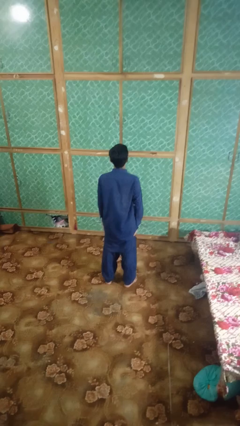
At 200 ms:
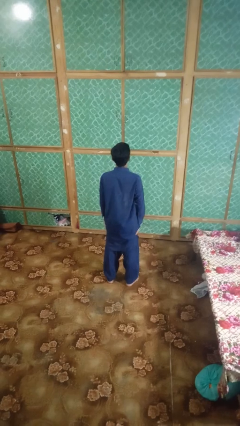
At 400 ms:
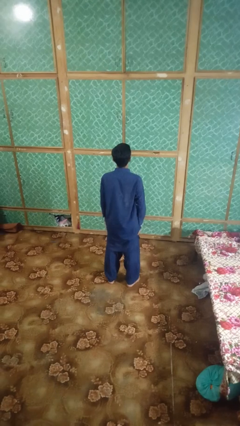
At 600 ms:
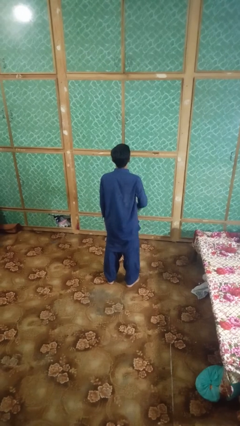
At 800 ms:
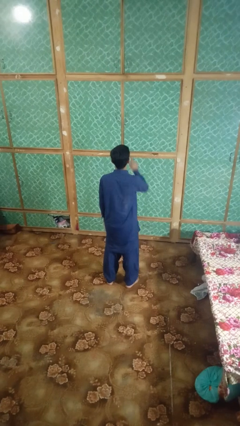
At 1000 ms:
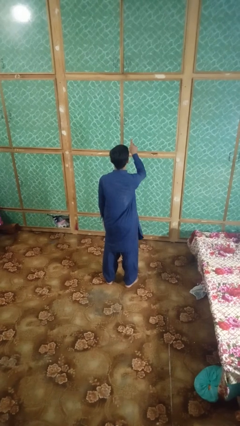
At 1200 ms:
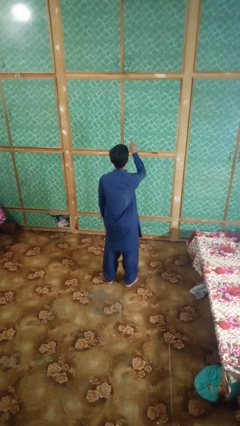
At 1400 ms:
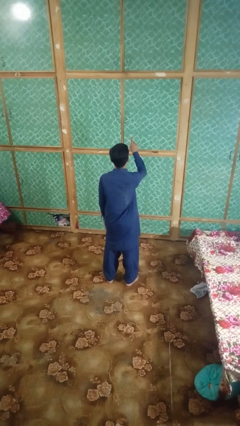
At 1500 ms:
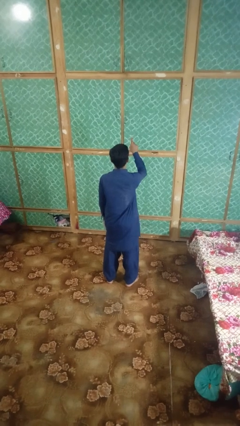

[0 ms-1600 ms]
person gestures number one

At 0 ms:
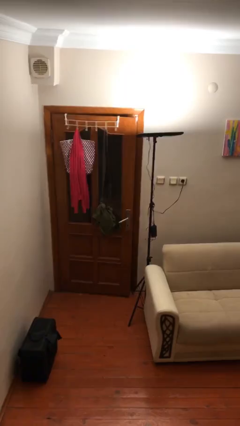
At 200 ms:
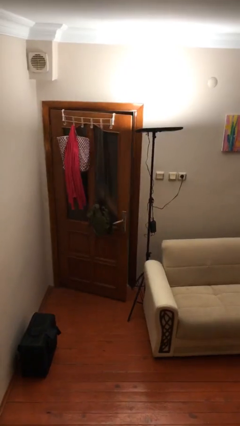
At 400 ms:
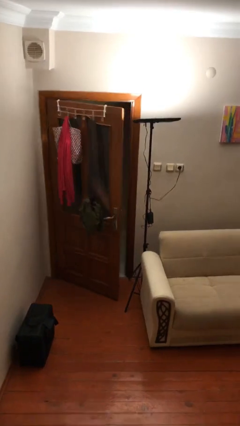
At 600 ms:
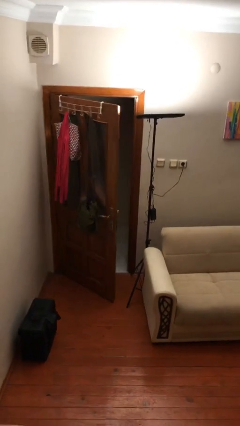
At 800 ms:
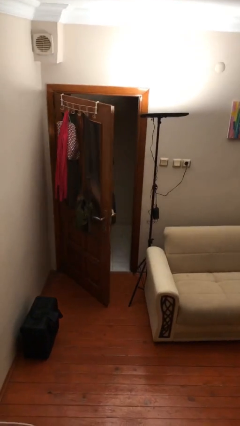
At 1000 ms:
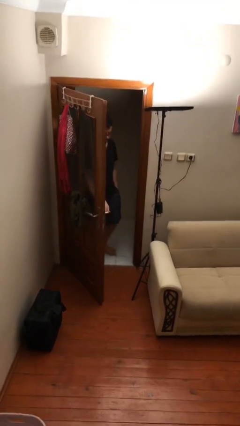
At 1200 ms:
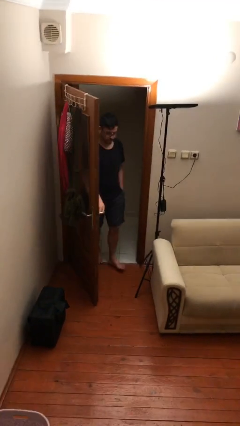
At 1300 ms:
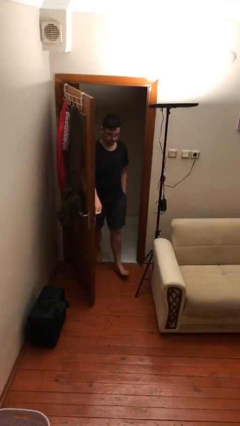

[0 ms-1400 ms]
person opens facility door

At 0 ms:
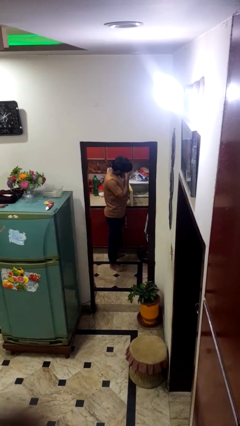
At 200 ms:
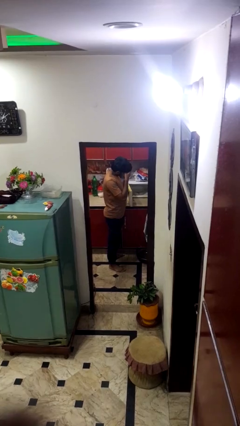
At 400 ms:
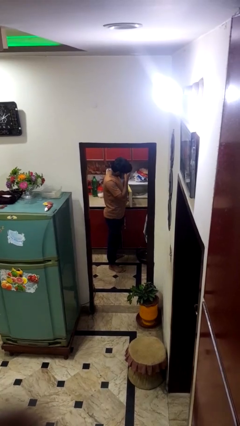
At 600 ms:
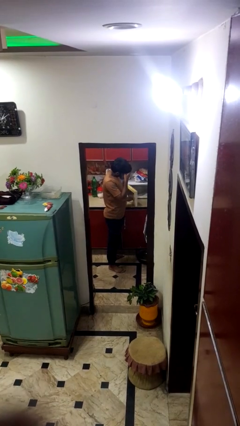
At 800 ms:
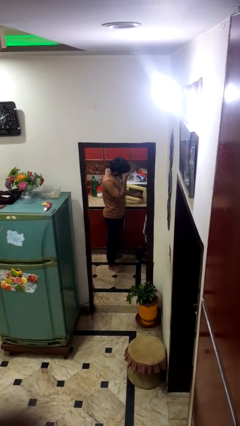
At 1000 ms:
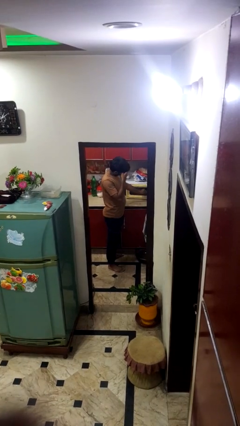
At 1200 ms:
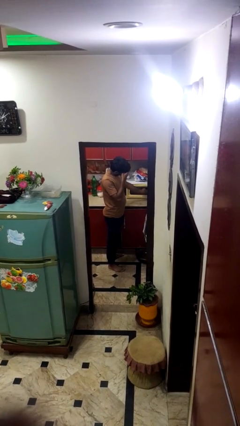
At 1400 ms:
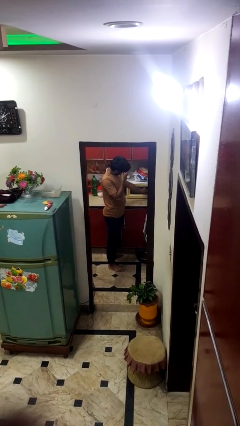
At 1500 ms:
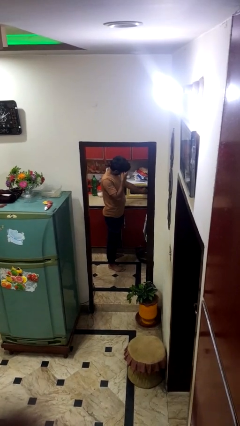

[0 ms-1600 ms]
person closes microwave

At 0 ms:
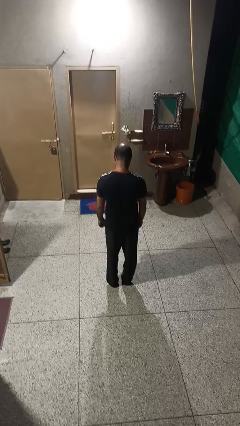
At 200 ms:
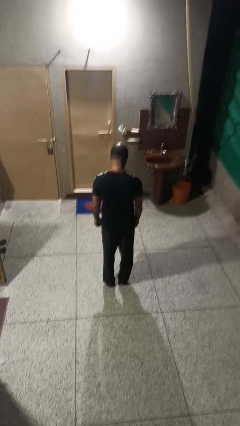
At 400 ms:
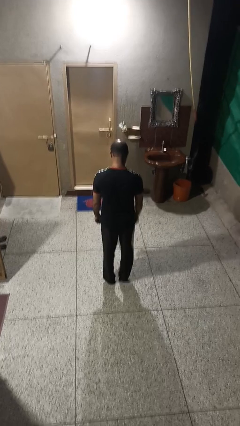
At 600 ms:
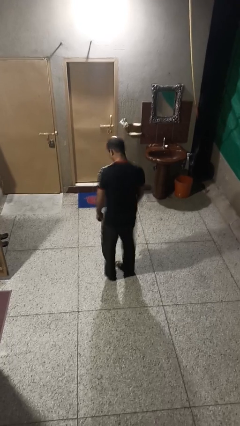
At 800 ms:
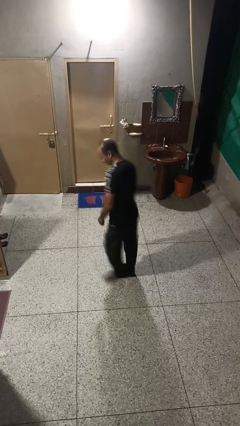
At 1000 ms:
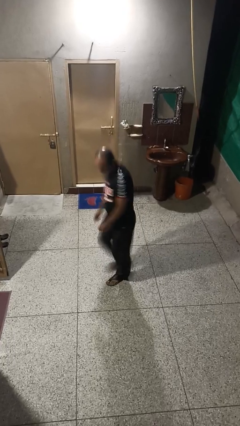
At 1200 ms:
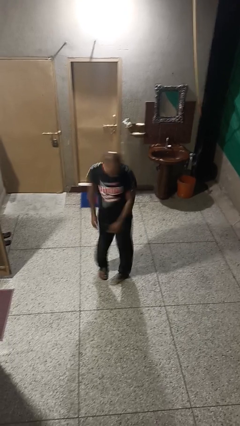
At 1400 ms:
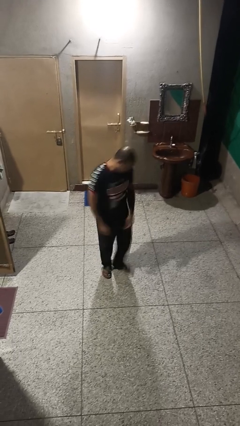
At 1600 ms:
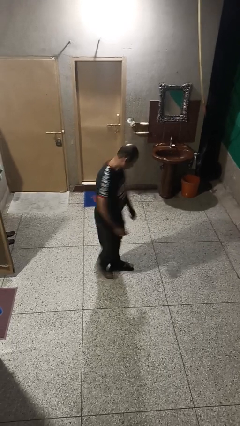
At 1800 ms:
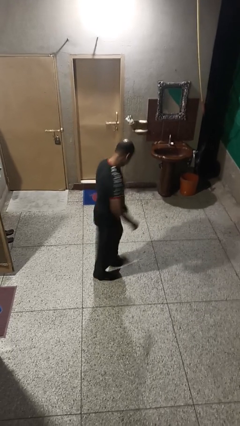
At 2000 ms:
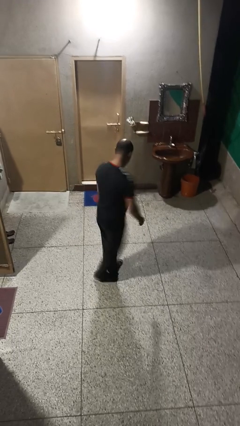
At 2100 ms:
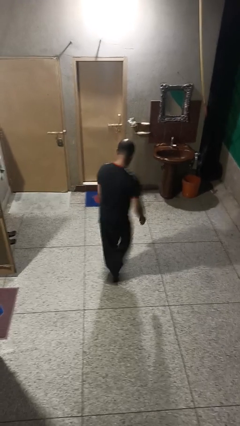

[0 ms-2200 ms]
person twirls

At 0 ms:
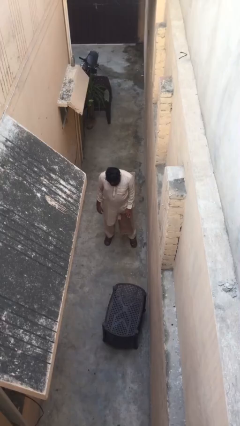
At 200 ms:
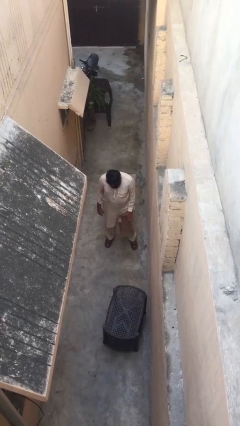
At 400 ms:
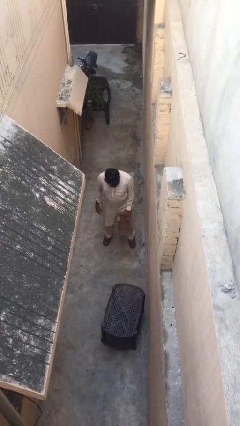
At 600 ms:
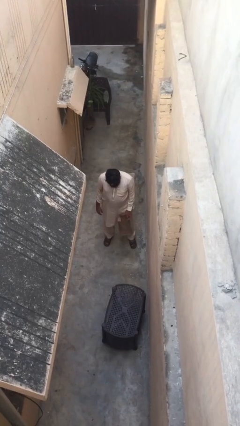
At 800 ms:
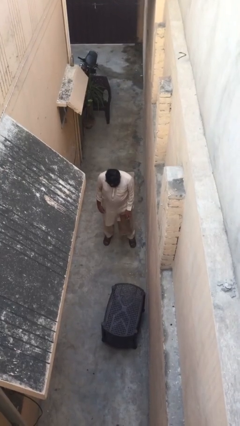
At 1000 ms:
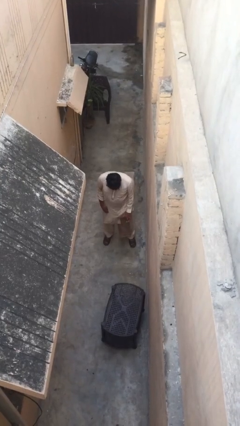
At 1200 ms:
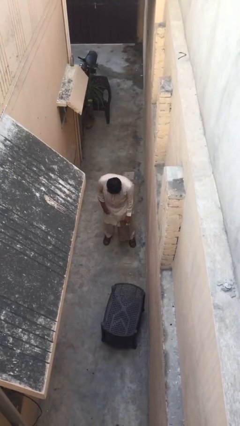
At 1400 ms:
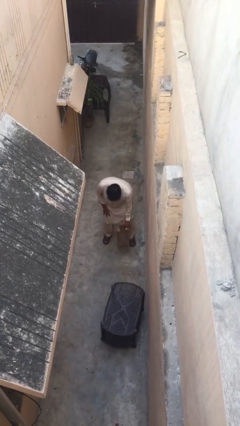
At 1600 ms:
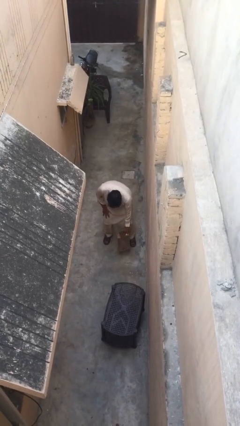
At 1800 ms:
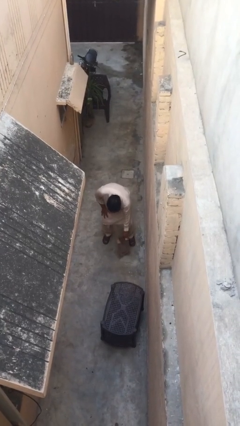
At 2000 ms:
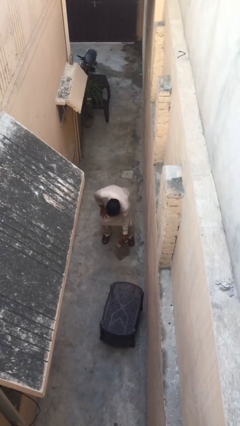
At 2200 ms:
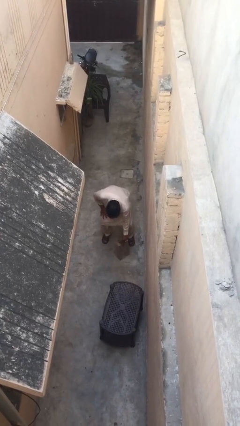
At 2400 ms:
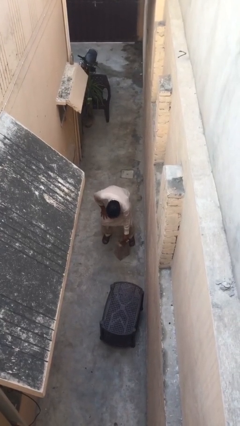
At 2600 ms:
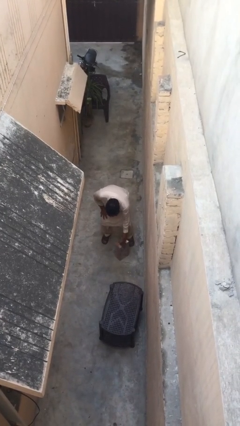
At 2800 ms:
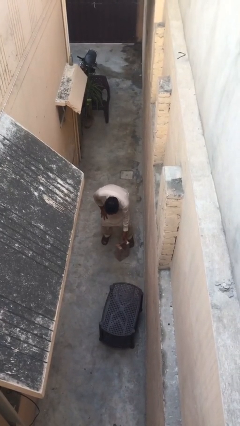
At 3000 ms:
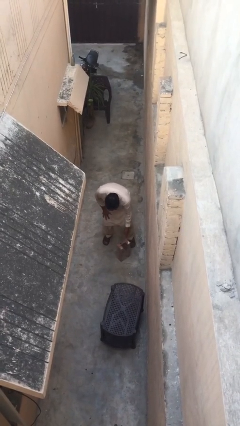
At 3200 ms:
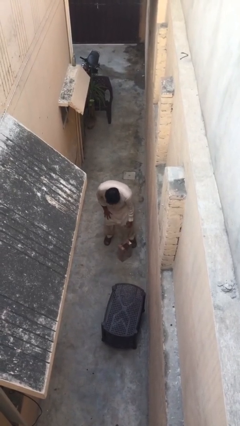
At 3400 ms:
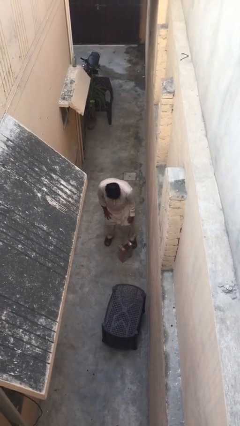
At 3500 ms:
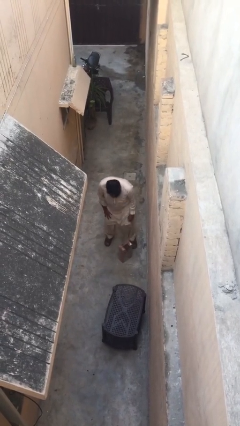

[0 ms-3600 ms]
person puts down object on floor

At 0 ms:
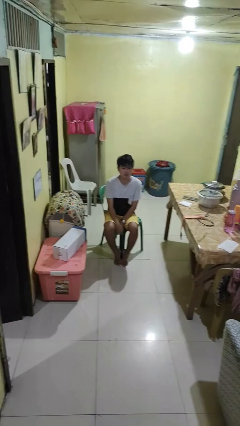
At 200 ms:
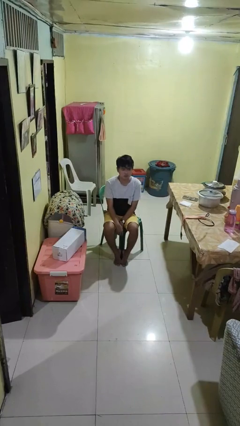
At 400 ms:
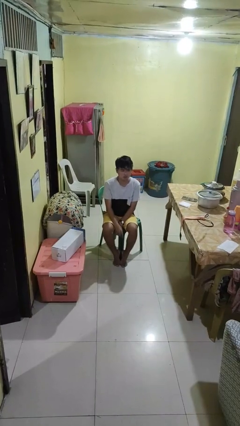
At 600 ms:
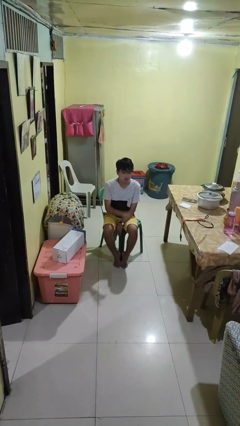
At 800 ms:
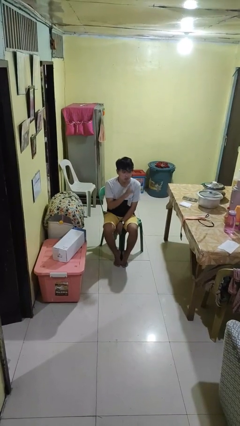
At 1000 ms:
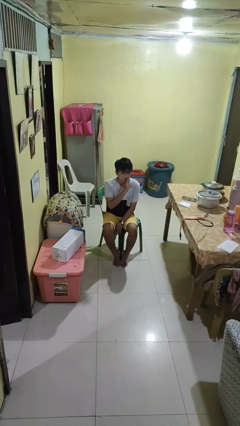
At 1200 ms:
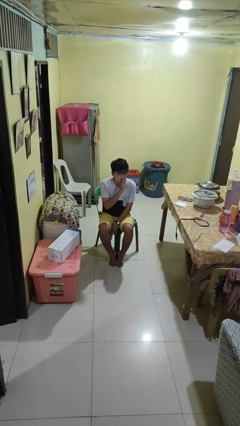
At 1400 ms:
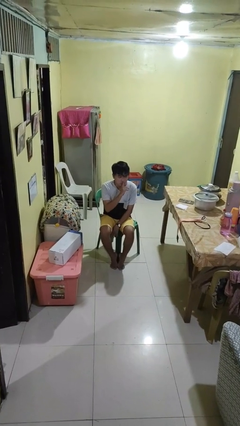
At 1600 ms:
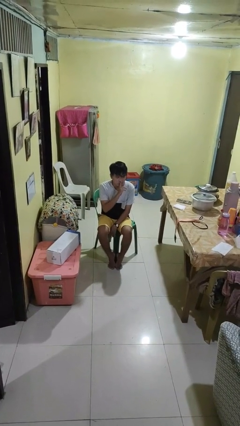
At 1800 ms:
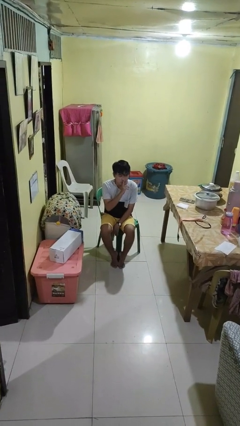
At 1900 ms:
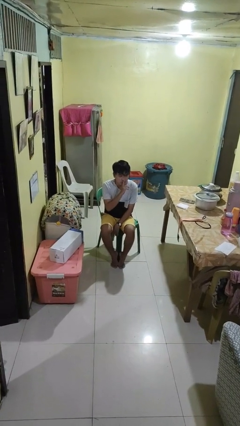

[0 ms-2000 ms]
person gestures be quiet

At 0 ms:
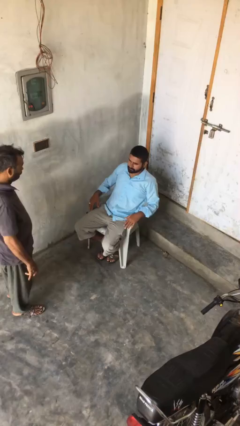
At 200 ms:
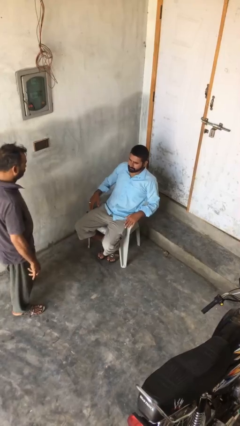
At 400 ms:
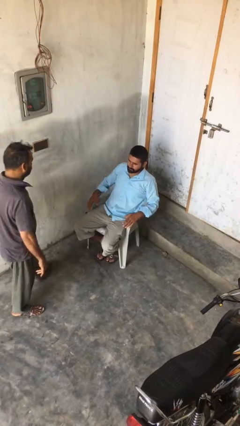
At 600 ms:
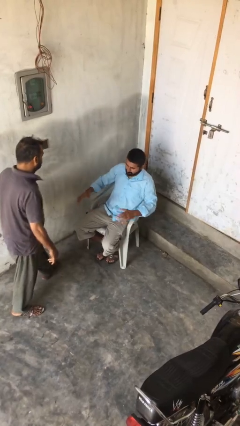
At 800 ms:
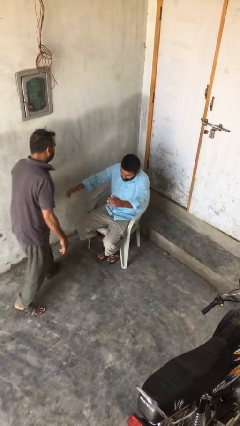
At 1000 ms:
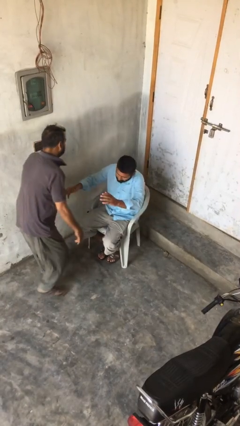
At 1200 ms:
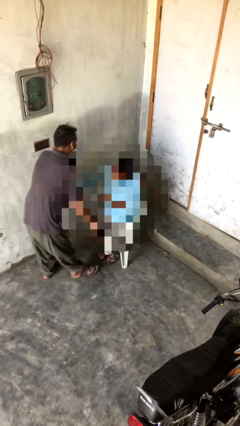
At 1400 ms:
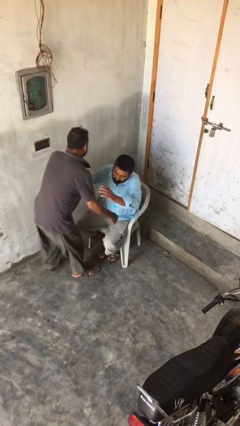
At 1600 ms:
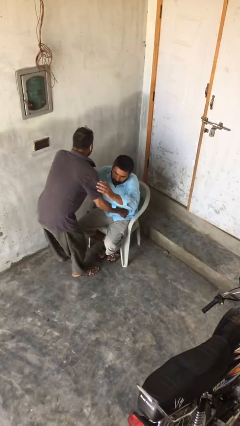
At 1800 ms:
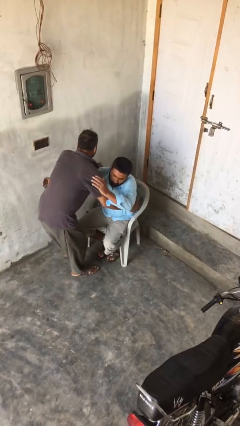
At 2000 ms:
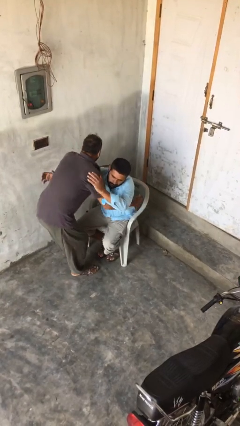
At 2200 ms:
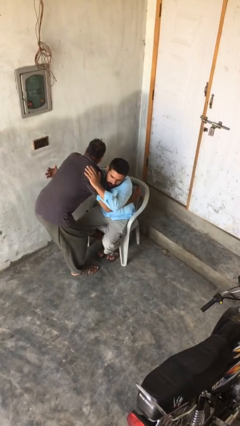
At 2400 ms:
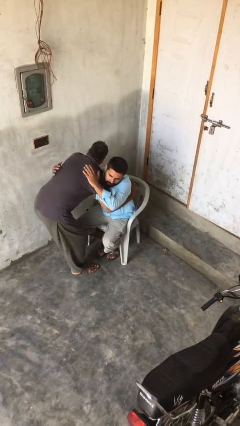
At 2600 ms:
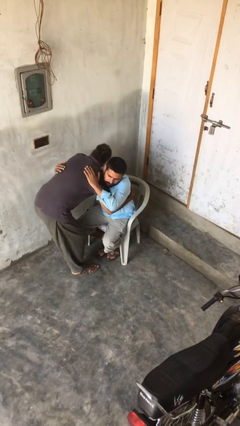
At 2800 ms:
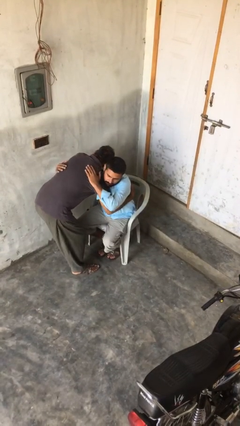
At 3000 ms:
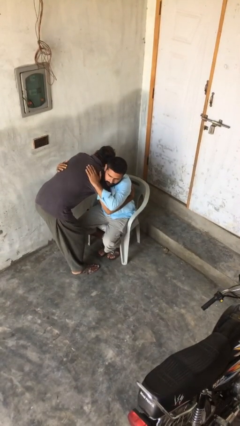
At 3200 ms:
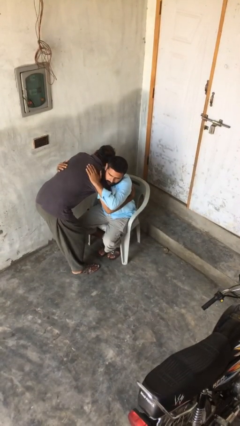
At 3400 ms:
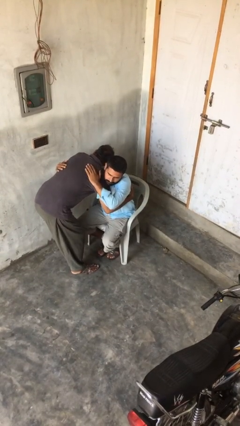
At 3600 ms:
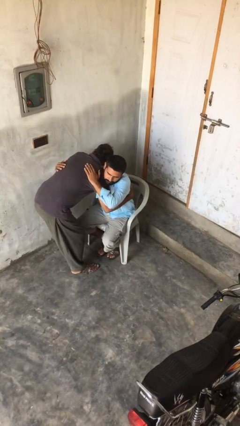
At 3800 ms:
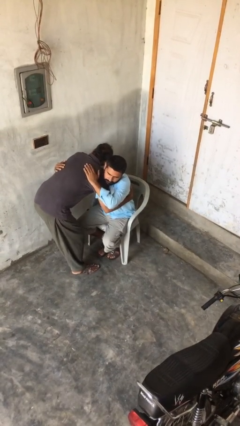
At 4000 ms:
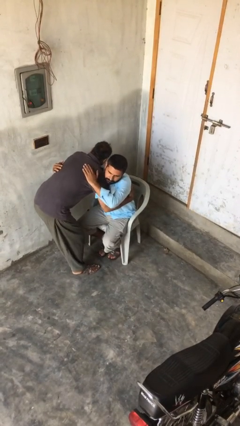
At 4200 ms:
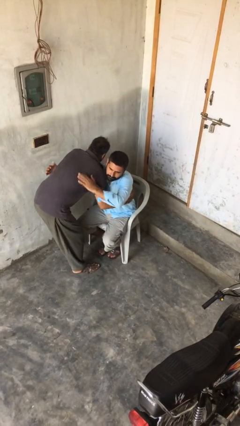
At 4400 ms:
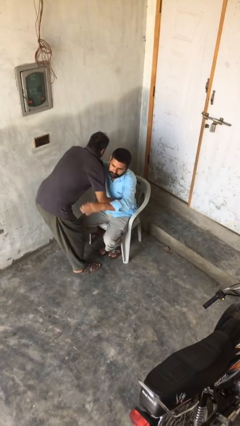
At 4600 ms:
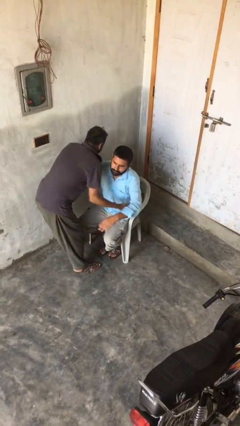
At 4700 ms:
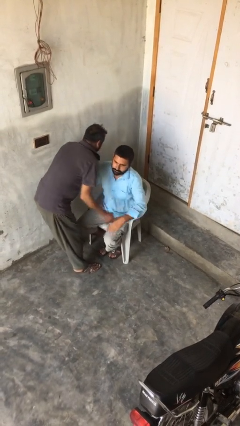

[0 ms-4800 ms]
person embraces person

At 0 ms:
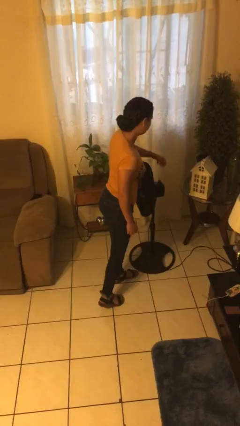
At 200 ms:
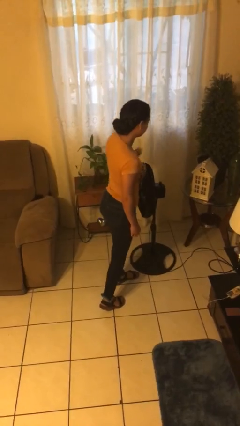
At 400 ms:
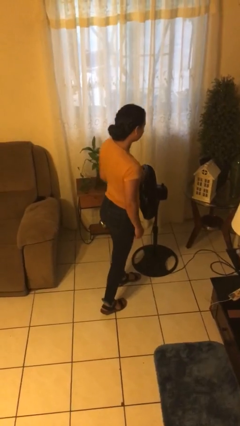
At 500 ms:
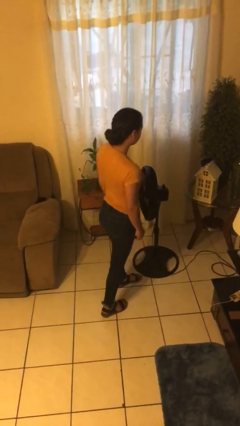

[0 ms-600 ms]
person turns off fan
